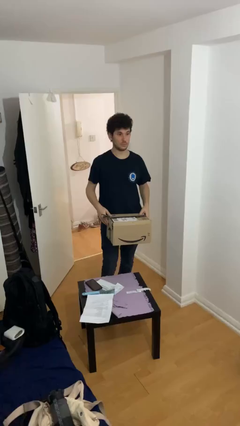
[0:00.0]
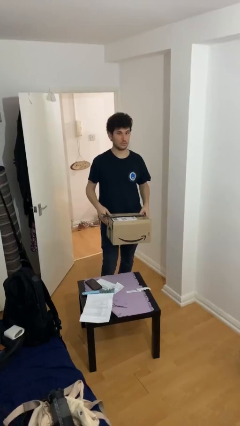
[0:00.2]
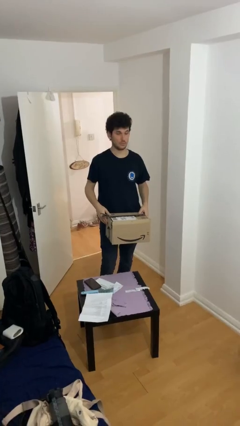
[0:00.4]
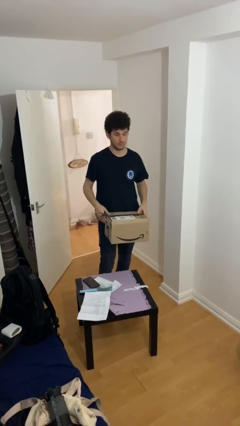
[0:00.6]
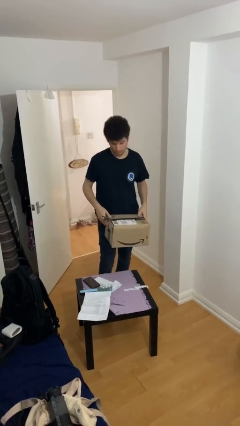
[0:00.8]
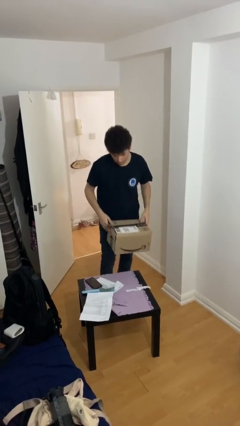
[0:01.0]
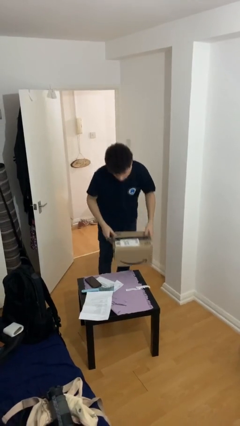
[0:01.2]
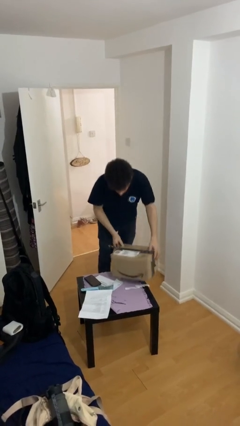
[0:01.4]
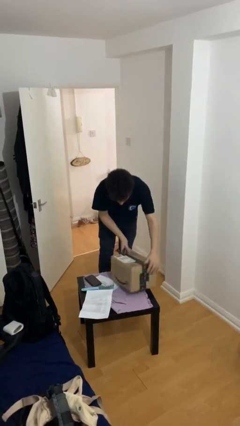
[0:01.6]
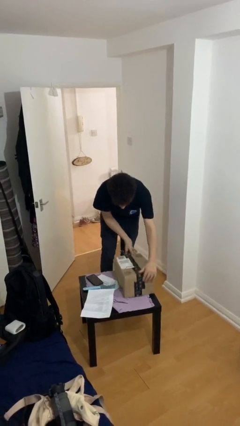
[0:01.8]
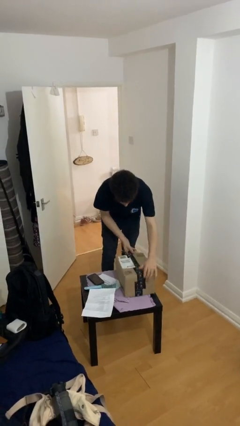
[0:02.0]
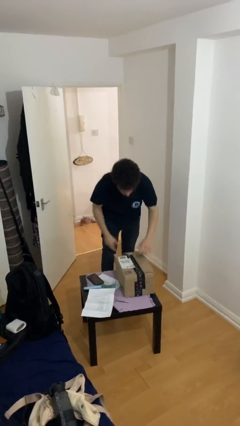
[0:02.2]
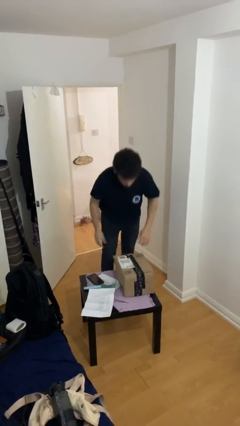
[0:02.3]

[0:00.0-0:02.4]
person puts down object on table

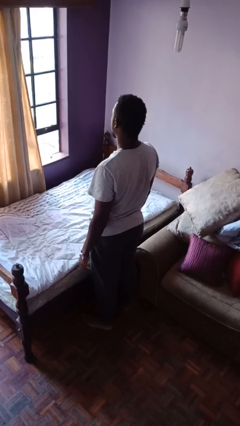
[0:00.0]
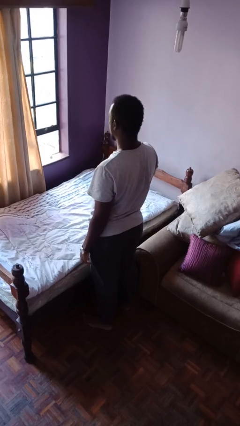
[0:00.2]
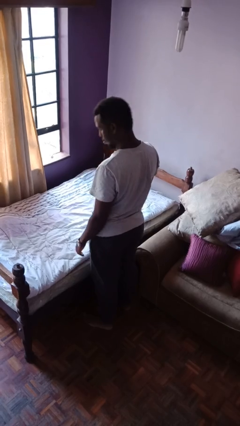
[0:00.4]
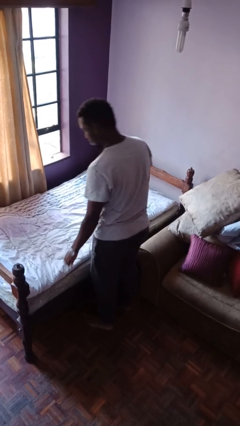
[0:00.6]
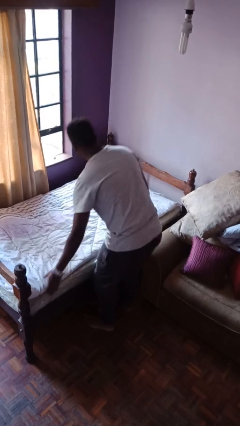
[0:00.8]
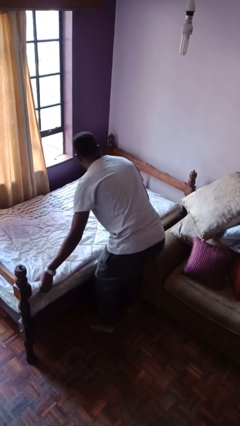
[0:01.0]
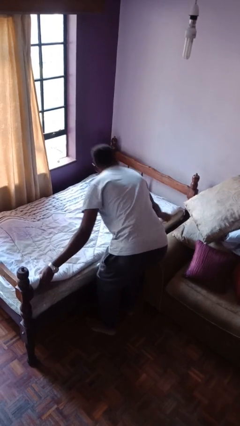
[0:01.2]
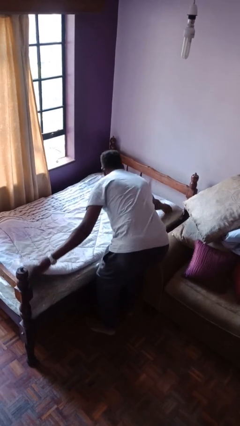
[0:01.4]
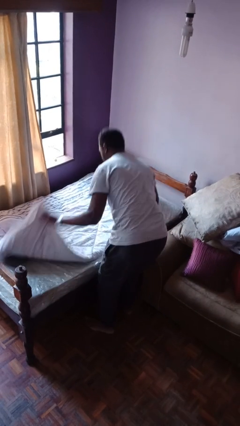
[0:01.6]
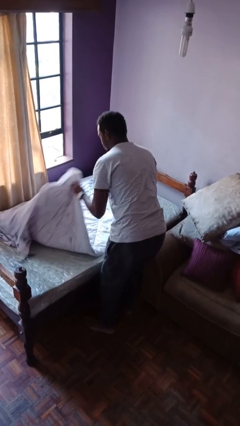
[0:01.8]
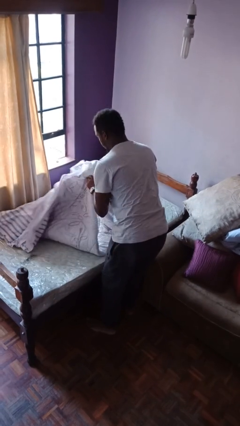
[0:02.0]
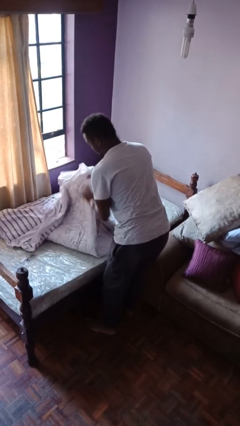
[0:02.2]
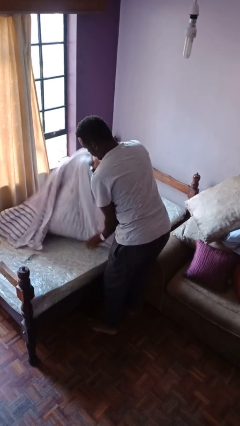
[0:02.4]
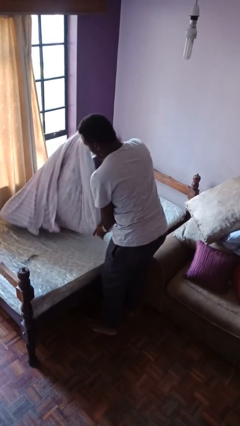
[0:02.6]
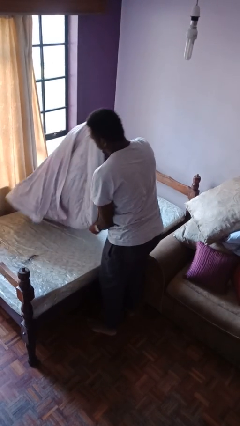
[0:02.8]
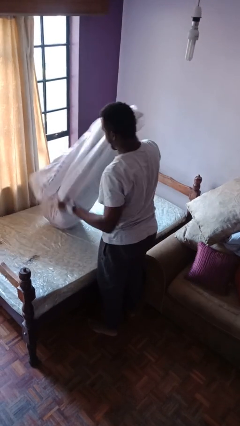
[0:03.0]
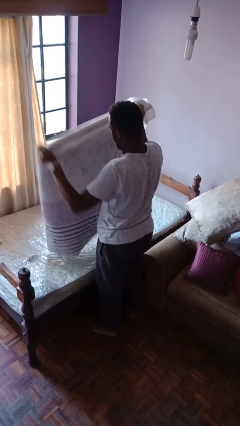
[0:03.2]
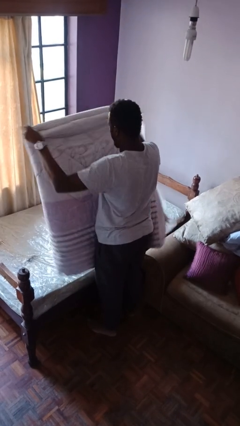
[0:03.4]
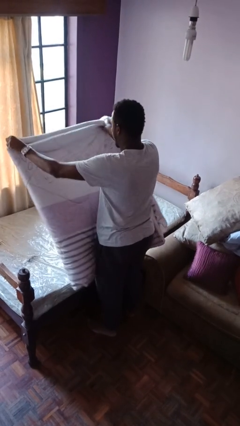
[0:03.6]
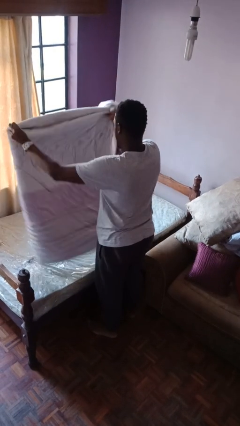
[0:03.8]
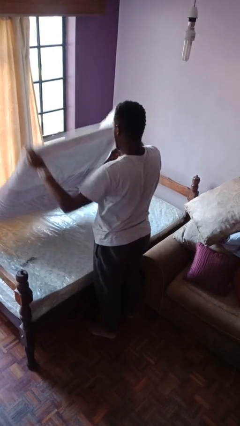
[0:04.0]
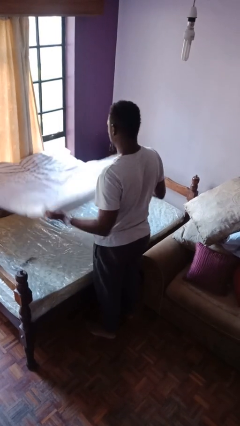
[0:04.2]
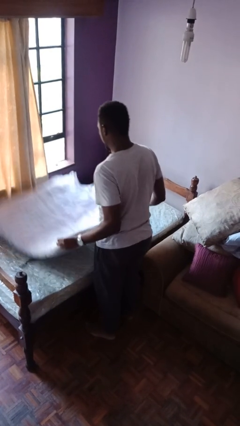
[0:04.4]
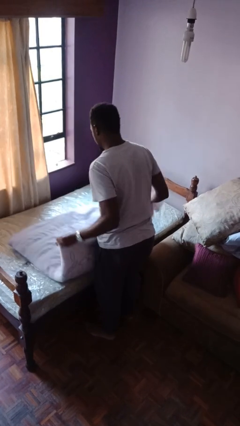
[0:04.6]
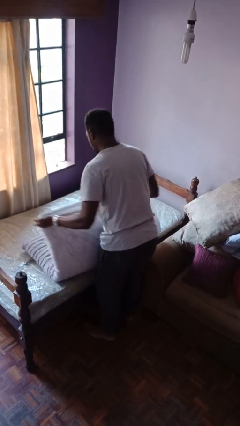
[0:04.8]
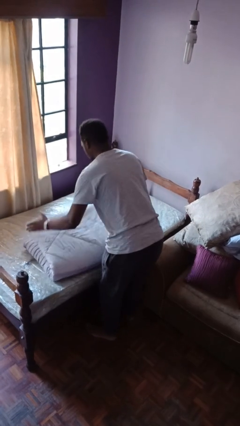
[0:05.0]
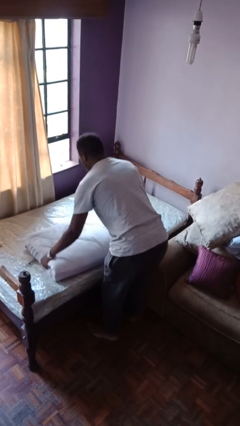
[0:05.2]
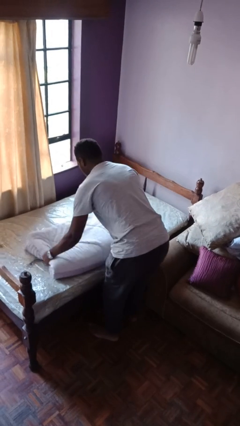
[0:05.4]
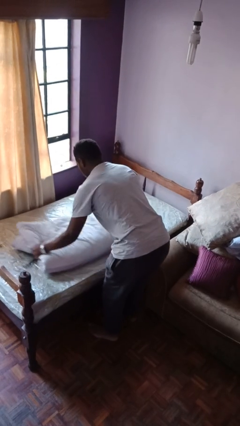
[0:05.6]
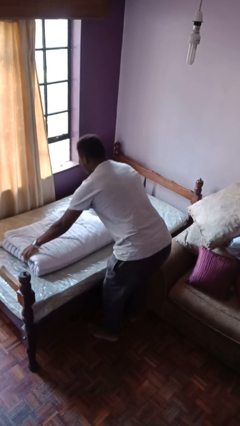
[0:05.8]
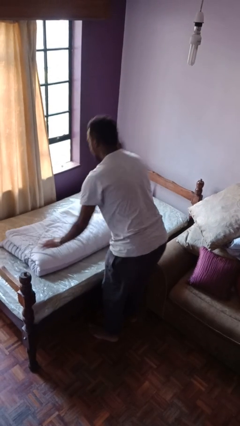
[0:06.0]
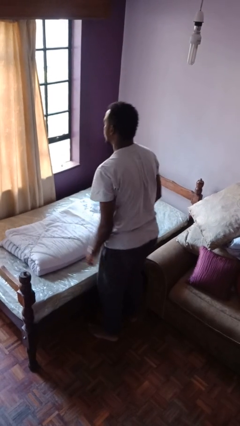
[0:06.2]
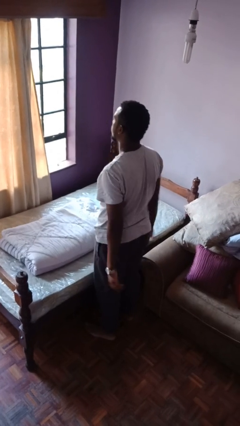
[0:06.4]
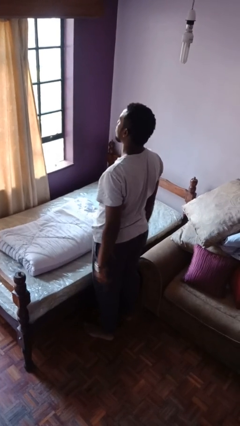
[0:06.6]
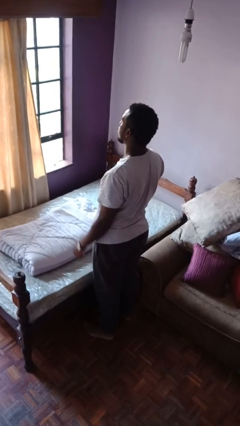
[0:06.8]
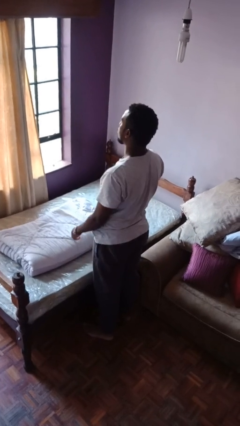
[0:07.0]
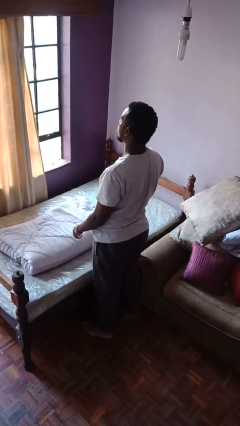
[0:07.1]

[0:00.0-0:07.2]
person folds blanket

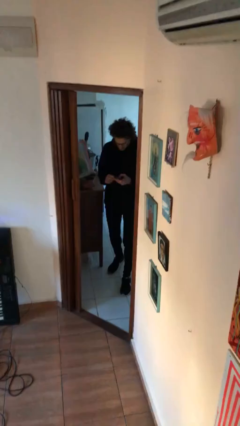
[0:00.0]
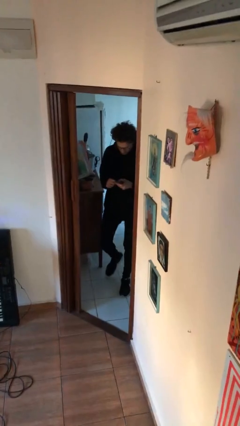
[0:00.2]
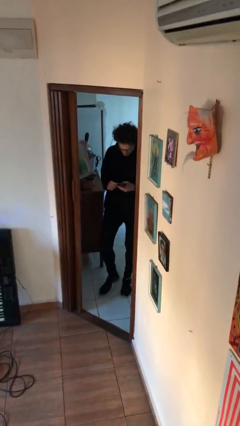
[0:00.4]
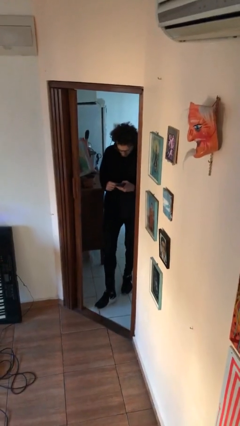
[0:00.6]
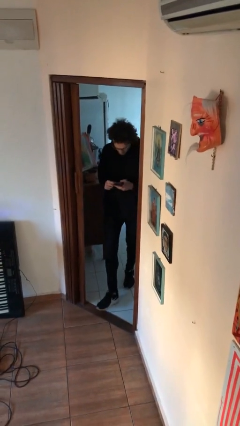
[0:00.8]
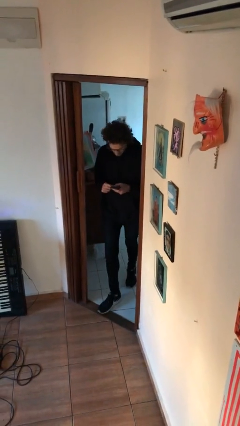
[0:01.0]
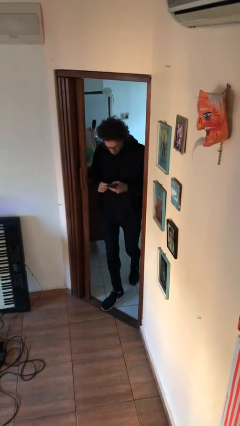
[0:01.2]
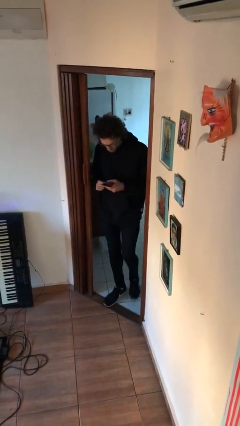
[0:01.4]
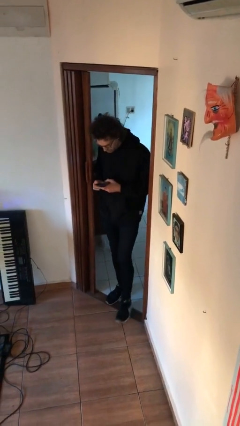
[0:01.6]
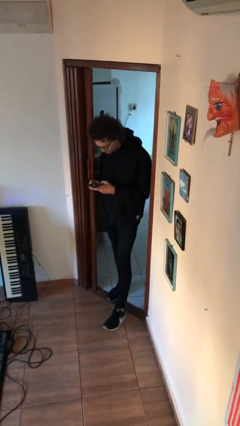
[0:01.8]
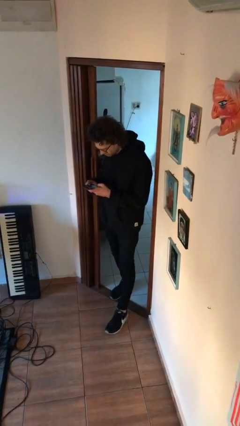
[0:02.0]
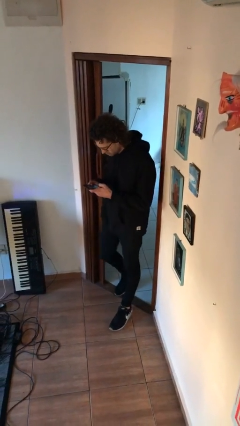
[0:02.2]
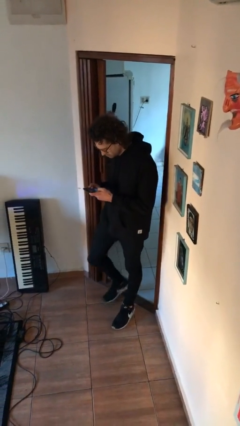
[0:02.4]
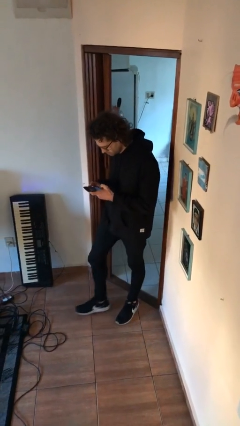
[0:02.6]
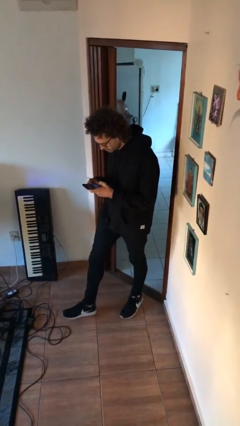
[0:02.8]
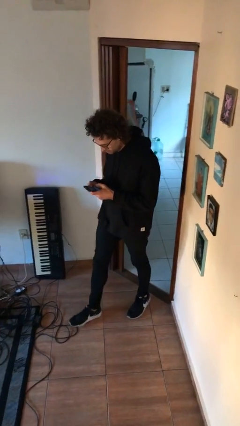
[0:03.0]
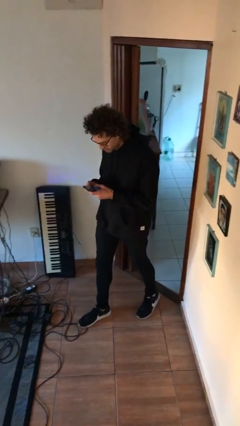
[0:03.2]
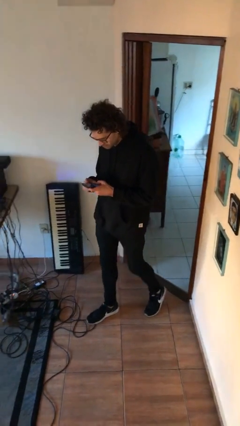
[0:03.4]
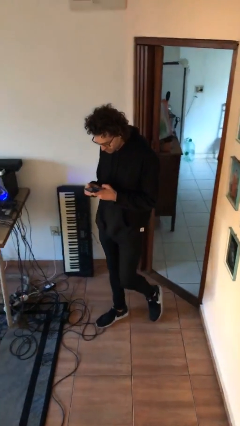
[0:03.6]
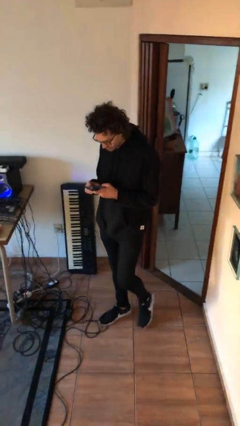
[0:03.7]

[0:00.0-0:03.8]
person texts on phone

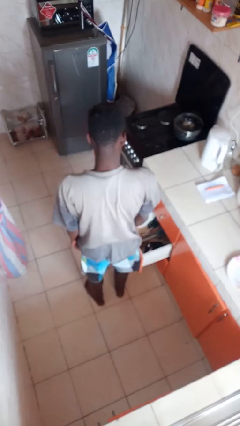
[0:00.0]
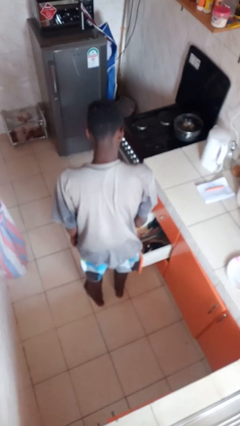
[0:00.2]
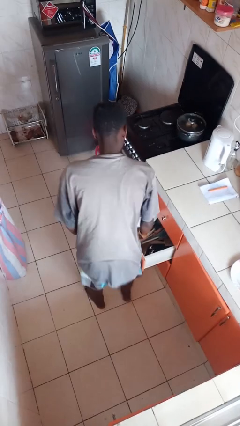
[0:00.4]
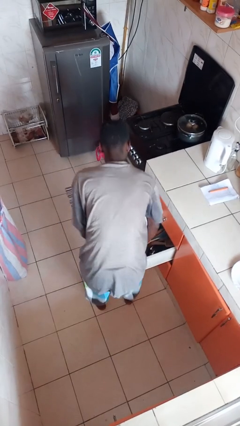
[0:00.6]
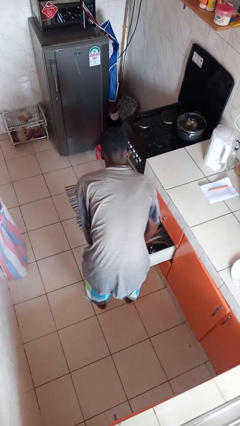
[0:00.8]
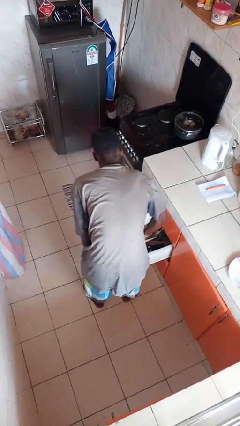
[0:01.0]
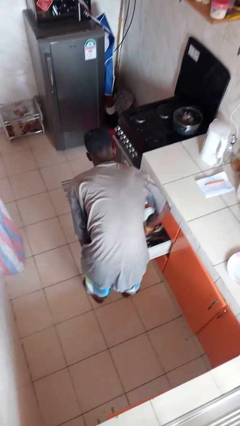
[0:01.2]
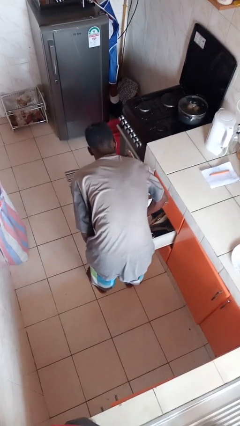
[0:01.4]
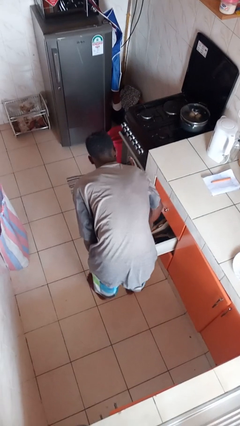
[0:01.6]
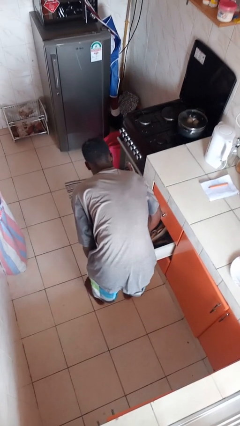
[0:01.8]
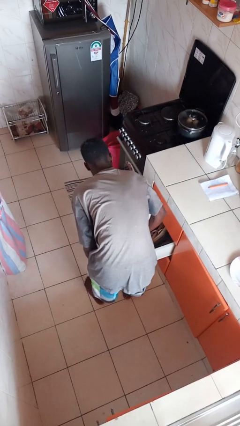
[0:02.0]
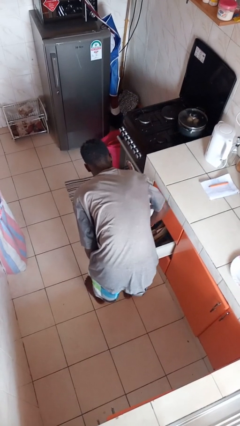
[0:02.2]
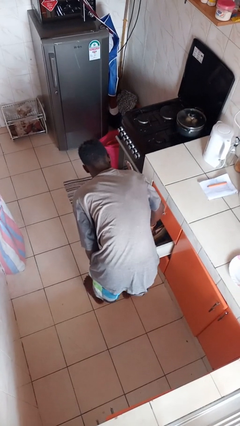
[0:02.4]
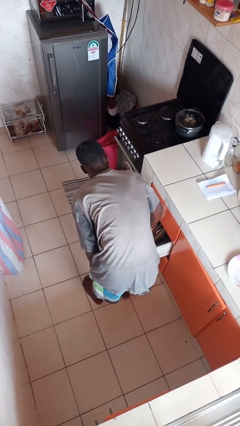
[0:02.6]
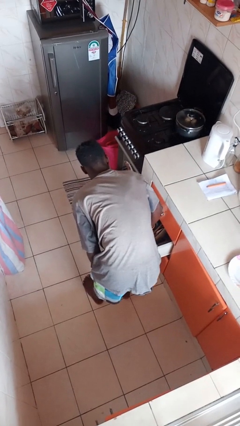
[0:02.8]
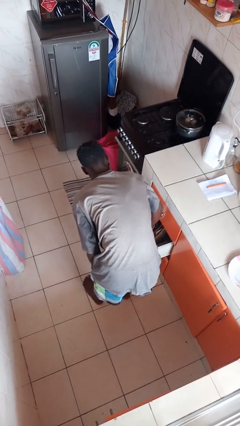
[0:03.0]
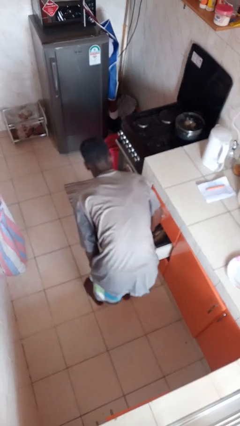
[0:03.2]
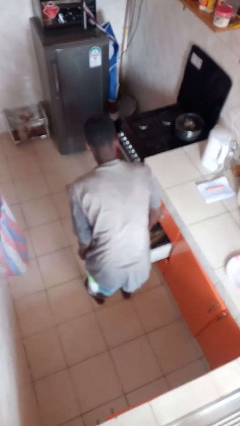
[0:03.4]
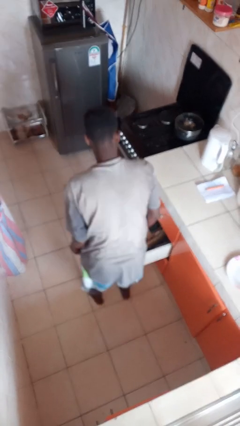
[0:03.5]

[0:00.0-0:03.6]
person searches in kitchen drawer

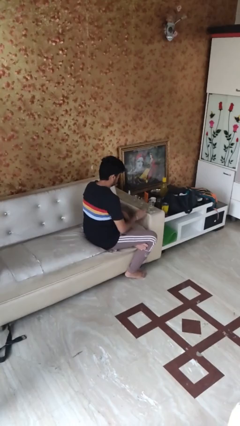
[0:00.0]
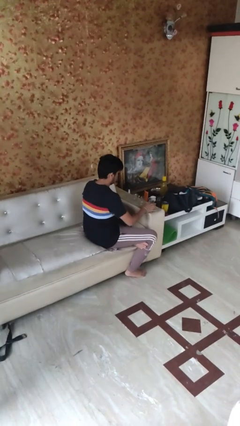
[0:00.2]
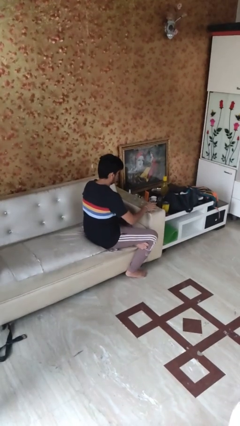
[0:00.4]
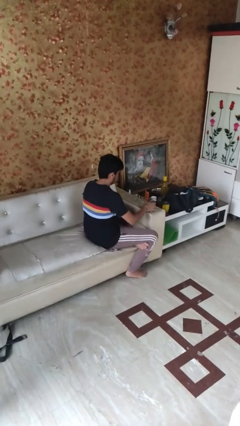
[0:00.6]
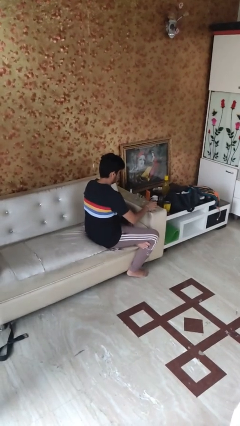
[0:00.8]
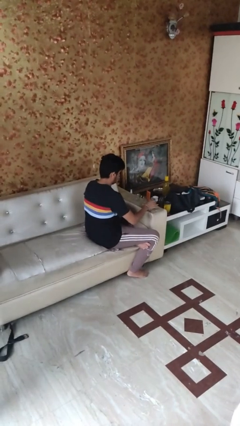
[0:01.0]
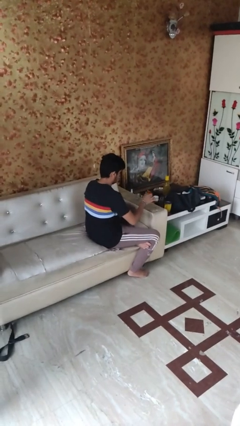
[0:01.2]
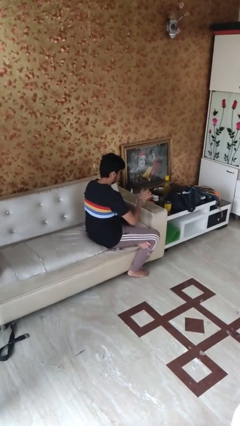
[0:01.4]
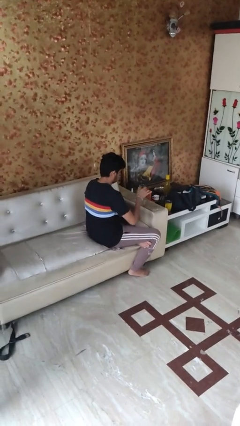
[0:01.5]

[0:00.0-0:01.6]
person picks up object from table
